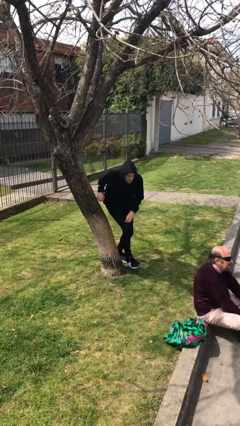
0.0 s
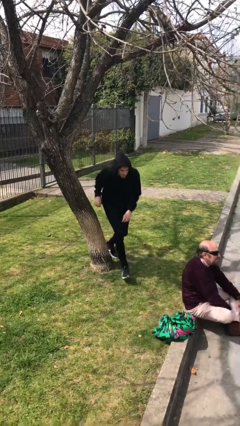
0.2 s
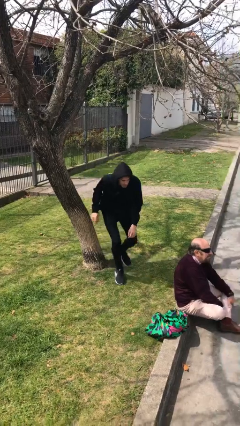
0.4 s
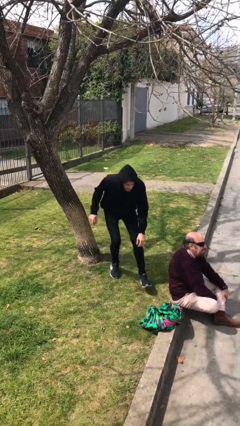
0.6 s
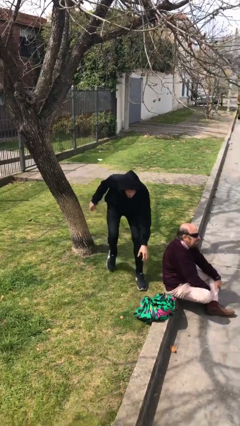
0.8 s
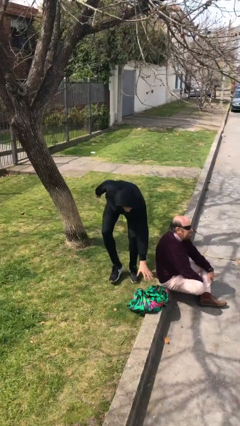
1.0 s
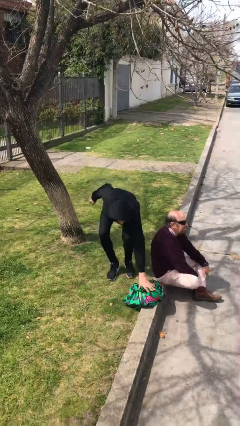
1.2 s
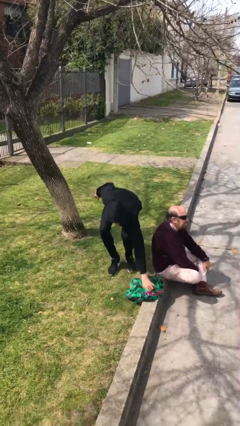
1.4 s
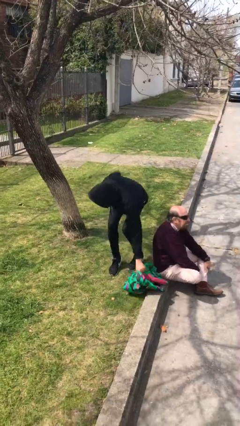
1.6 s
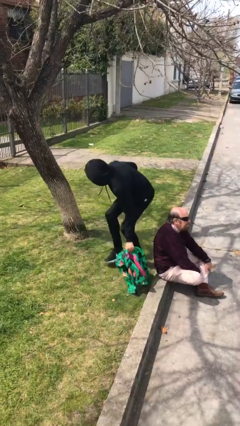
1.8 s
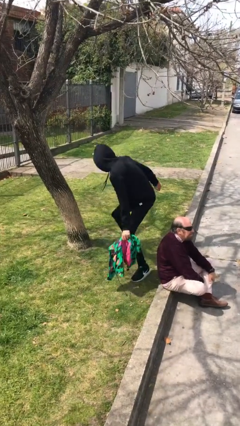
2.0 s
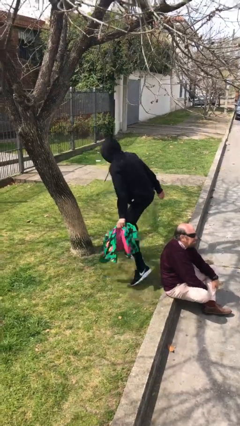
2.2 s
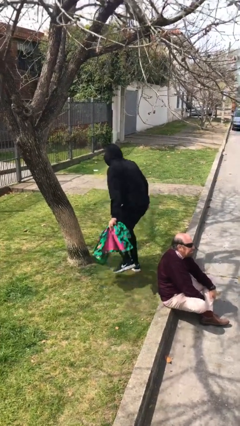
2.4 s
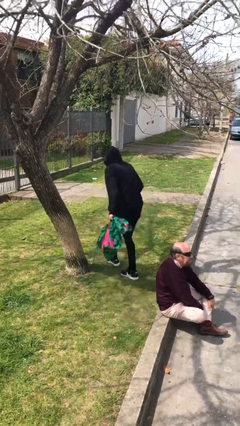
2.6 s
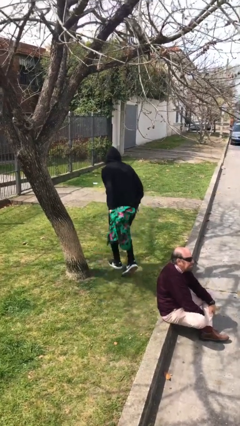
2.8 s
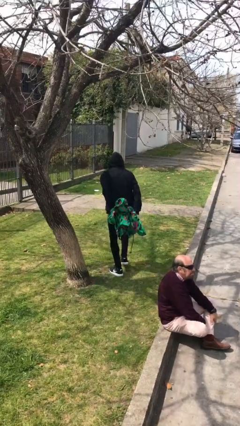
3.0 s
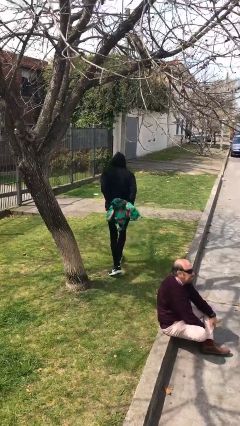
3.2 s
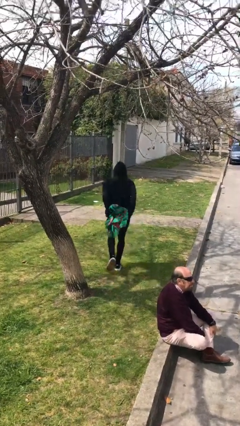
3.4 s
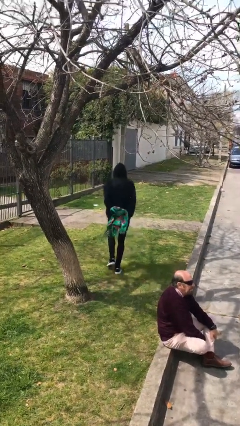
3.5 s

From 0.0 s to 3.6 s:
person steals object from person

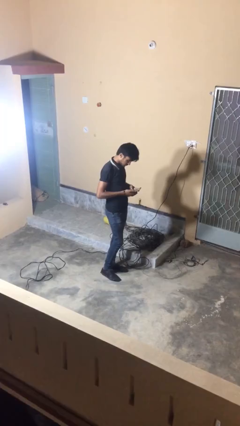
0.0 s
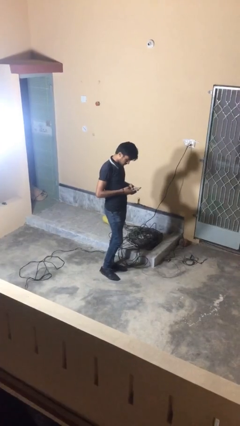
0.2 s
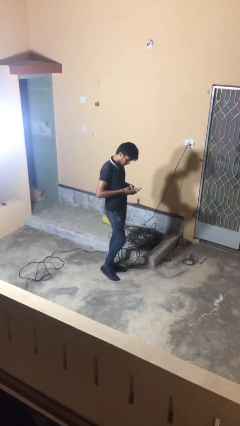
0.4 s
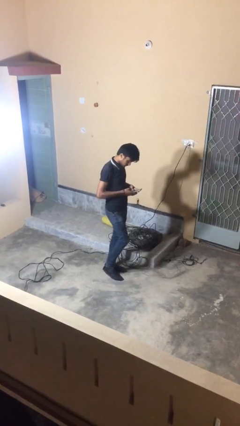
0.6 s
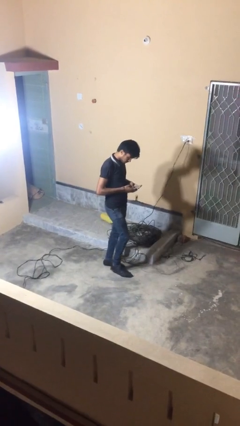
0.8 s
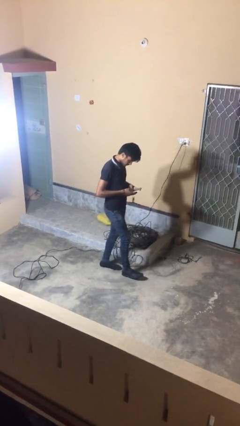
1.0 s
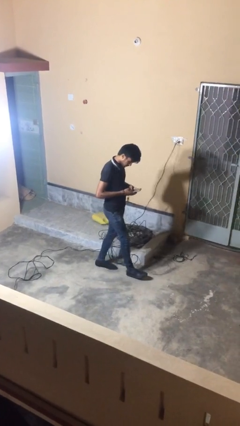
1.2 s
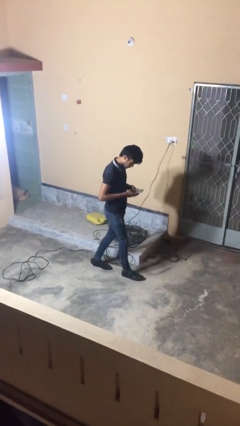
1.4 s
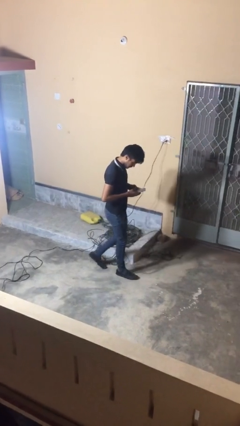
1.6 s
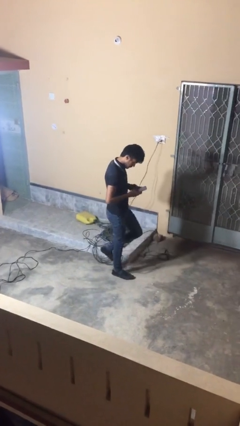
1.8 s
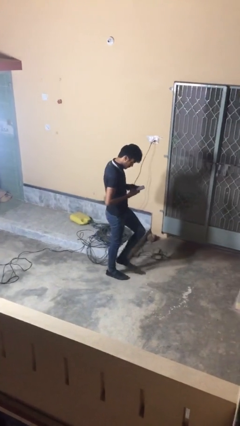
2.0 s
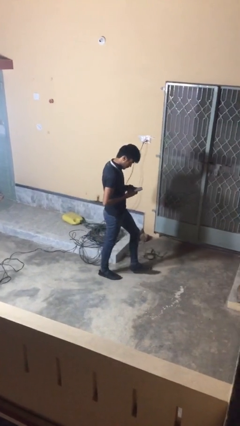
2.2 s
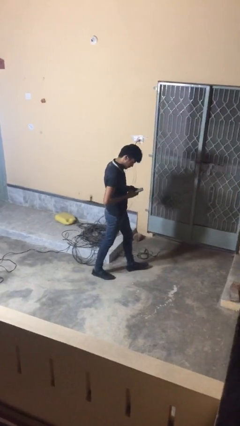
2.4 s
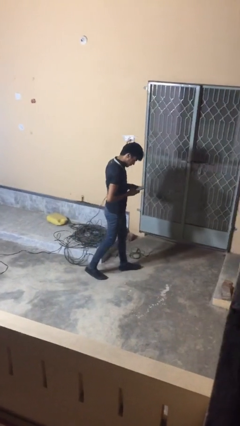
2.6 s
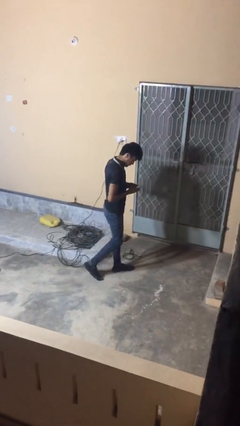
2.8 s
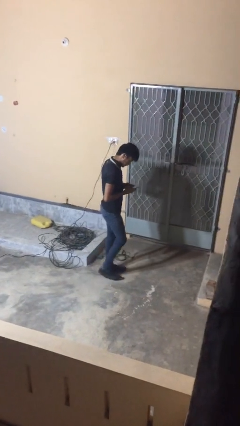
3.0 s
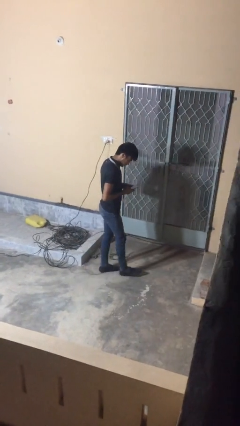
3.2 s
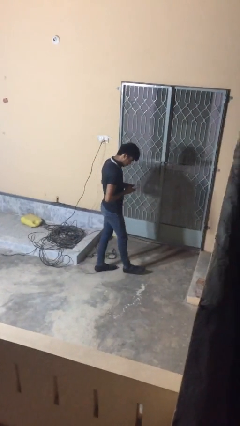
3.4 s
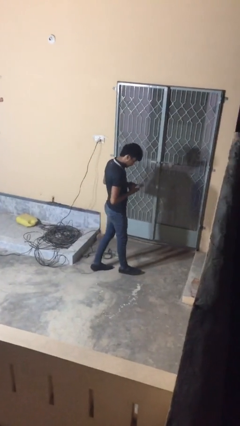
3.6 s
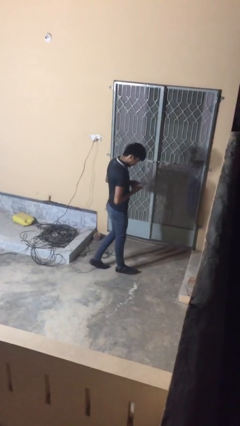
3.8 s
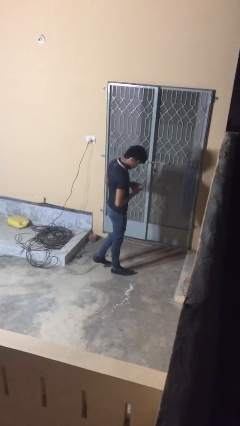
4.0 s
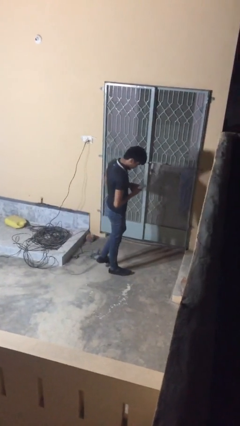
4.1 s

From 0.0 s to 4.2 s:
person texts on phone

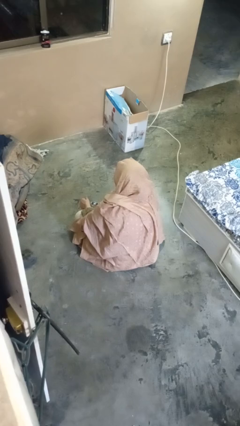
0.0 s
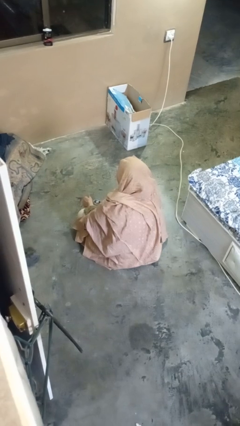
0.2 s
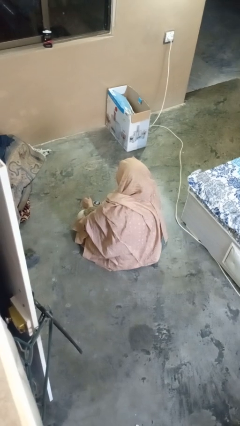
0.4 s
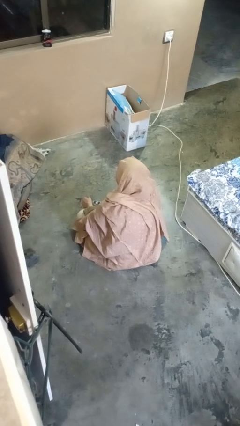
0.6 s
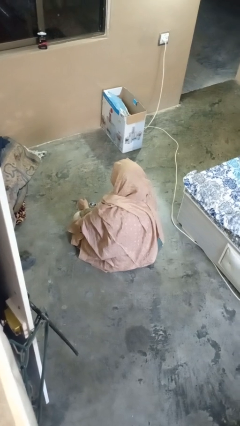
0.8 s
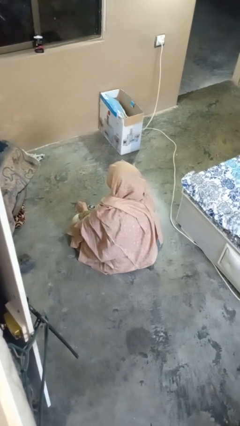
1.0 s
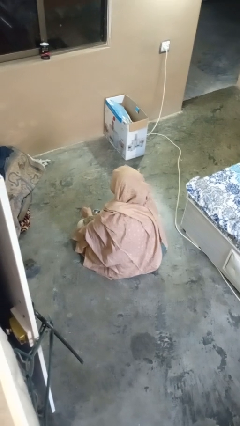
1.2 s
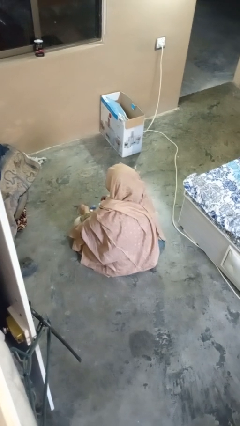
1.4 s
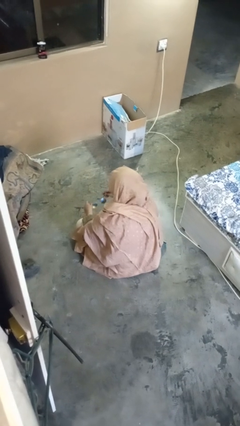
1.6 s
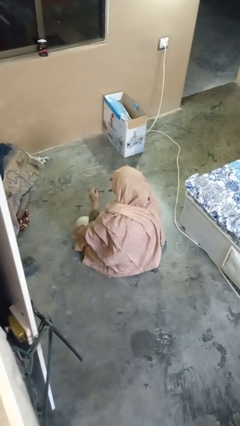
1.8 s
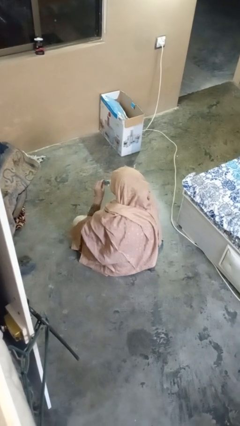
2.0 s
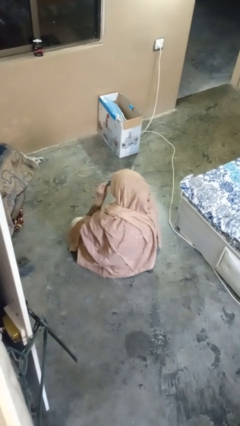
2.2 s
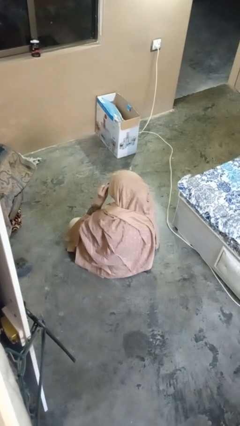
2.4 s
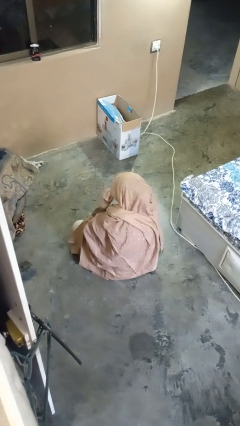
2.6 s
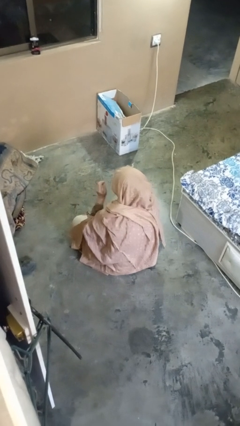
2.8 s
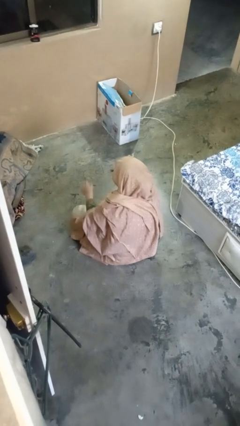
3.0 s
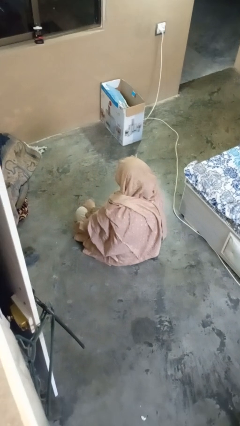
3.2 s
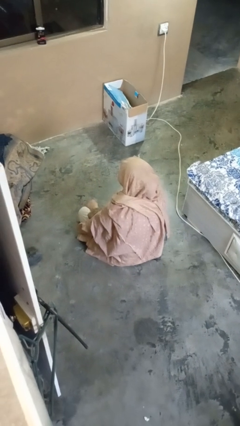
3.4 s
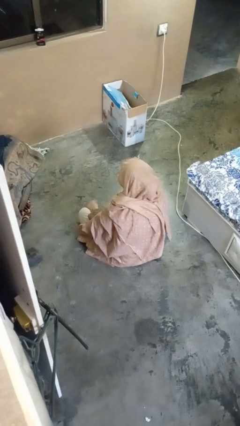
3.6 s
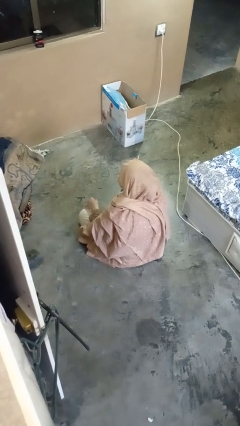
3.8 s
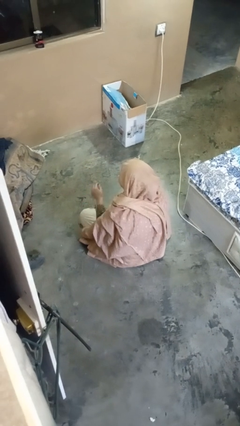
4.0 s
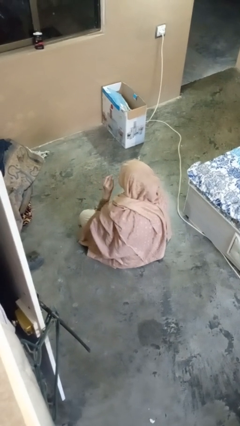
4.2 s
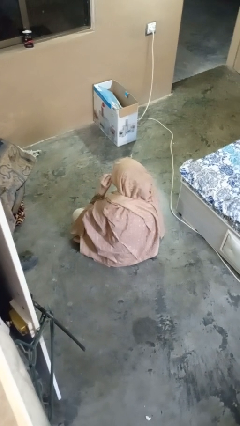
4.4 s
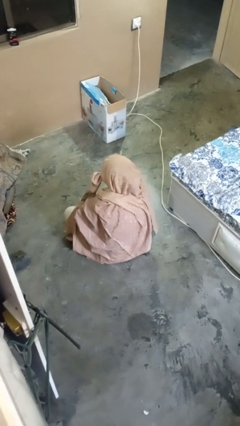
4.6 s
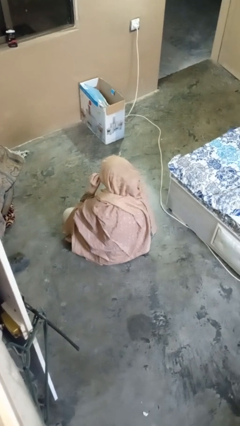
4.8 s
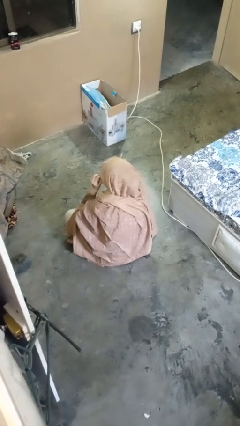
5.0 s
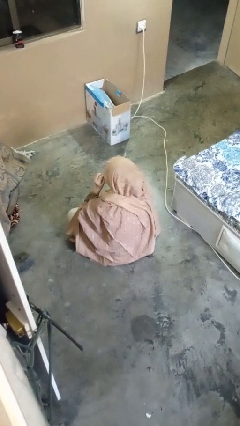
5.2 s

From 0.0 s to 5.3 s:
person puts on glasses

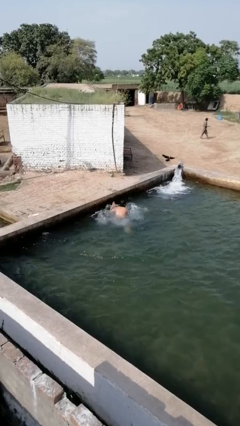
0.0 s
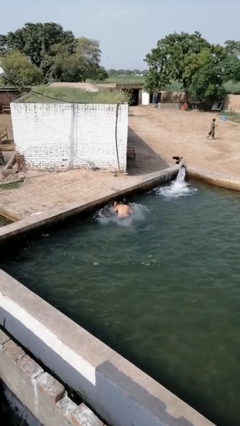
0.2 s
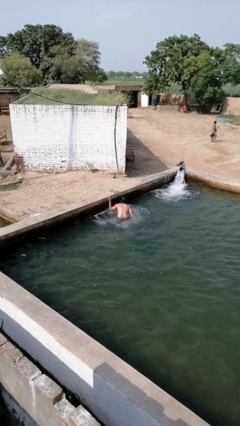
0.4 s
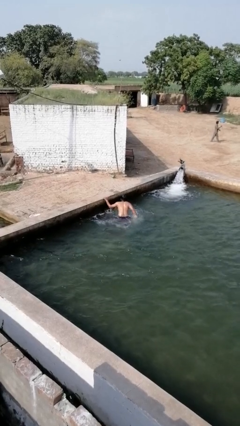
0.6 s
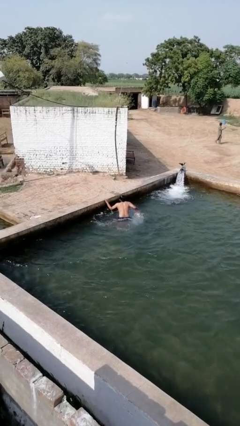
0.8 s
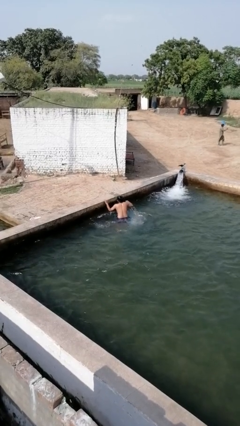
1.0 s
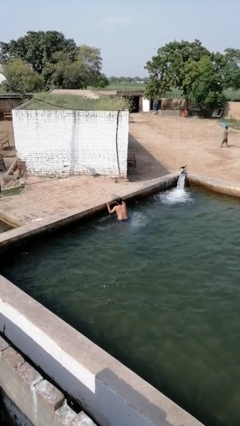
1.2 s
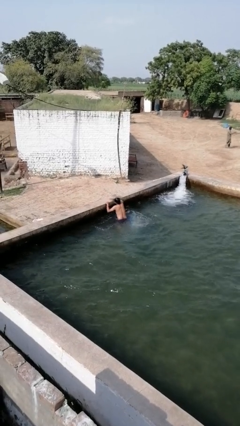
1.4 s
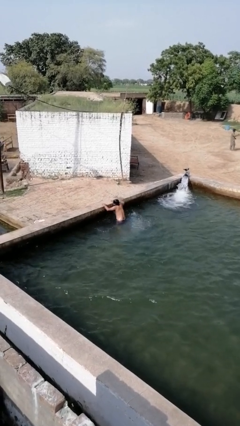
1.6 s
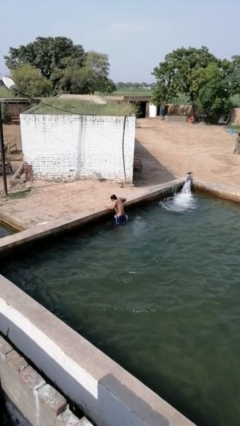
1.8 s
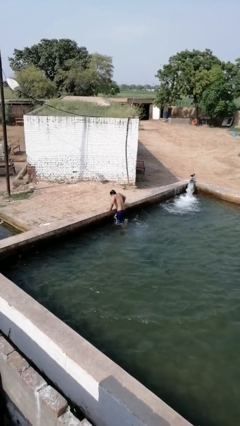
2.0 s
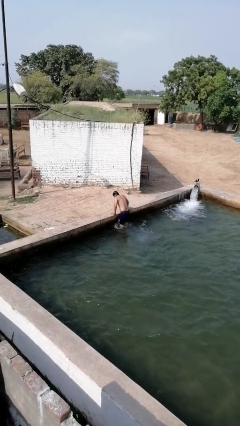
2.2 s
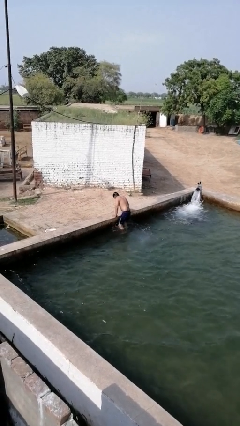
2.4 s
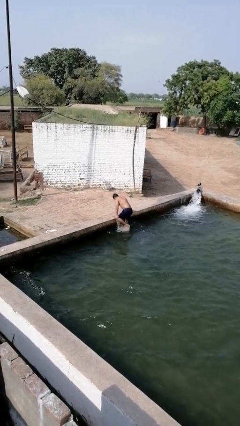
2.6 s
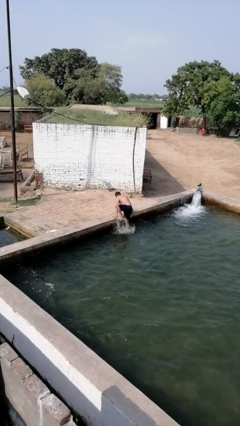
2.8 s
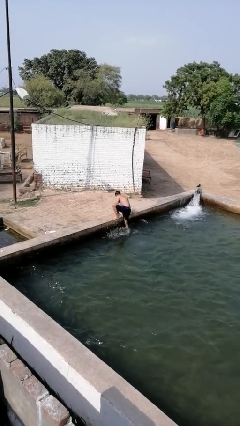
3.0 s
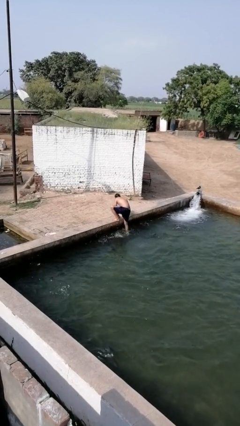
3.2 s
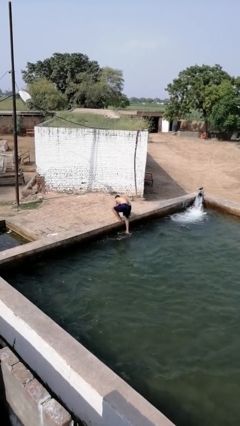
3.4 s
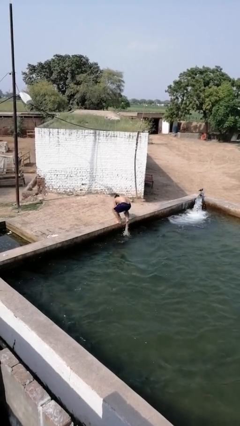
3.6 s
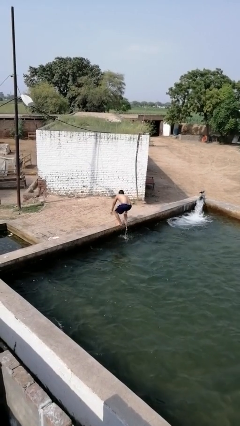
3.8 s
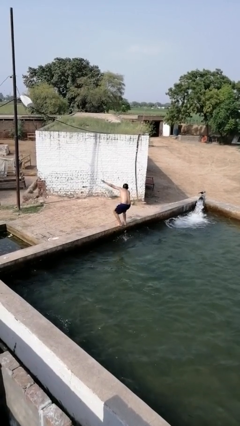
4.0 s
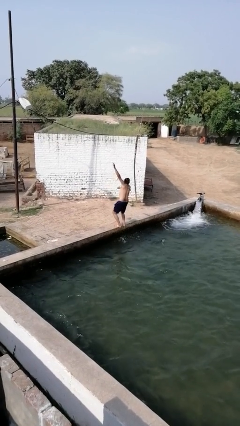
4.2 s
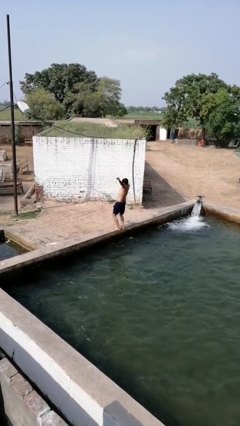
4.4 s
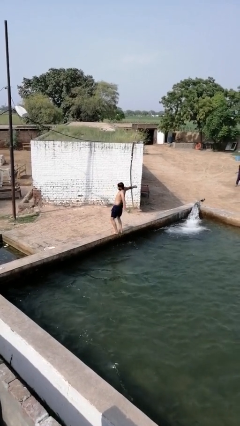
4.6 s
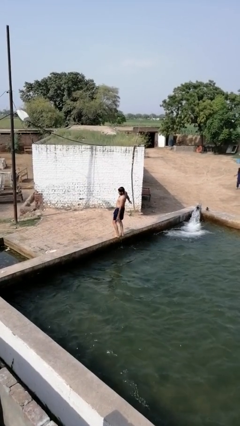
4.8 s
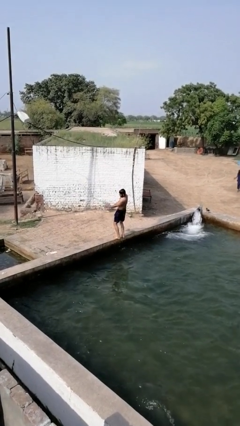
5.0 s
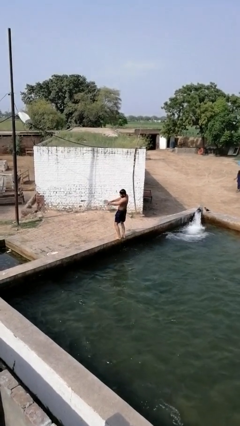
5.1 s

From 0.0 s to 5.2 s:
person exits pool
